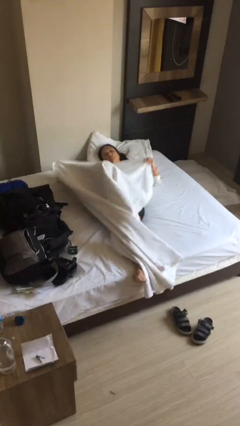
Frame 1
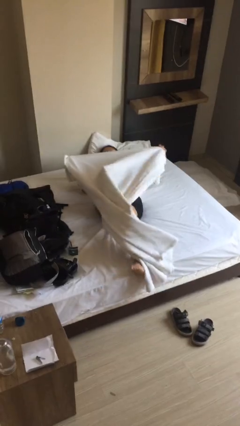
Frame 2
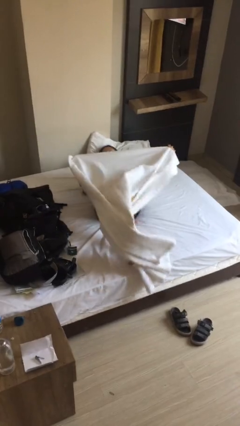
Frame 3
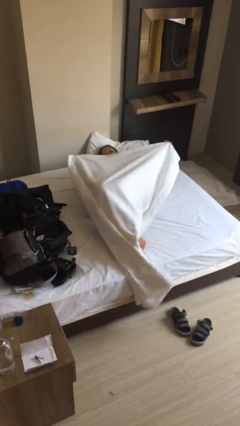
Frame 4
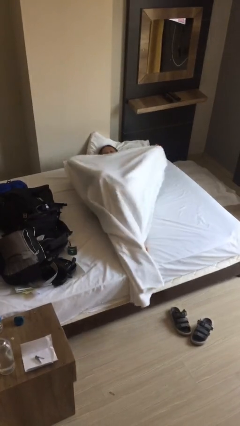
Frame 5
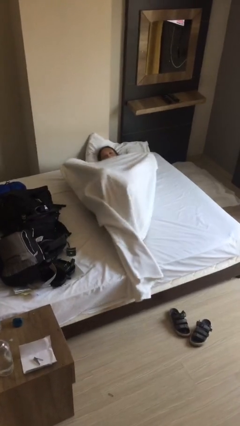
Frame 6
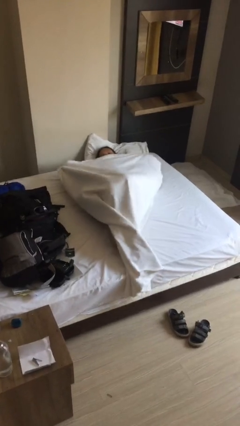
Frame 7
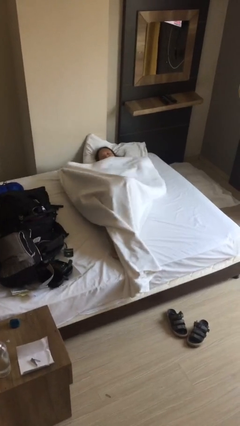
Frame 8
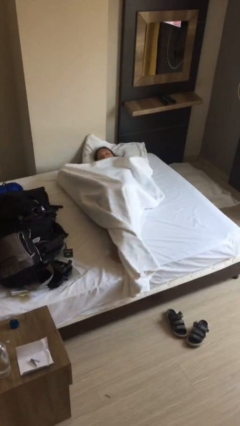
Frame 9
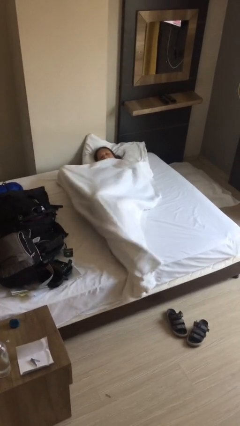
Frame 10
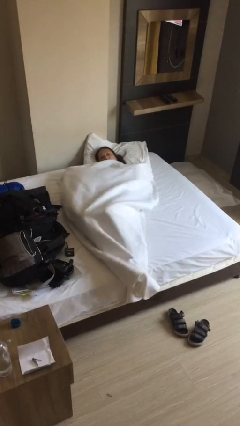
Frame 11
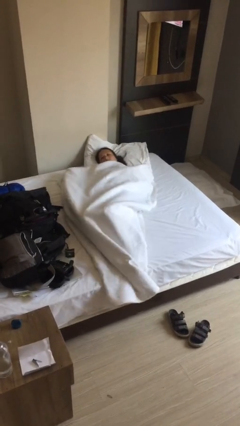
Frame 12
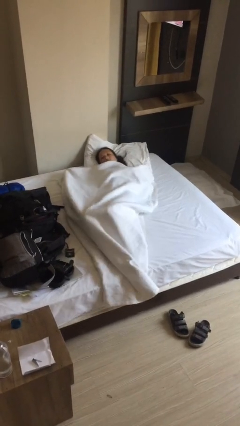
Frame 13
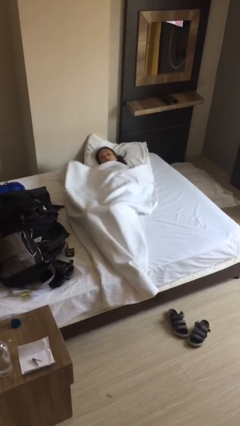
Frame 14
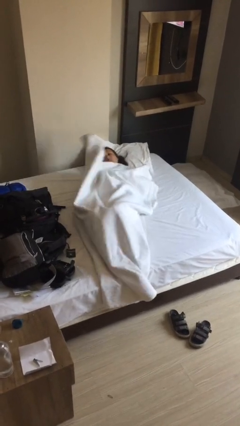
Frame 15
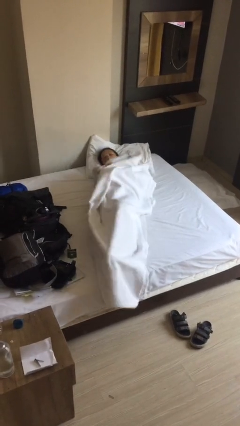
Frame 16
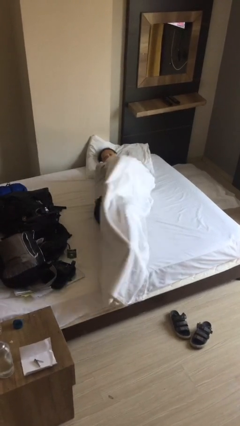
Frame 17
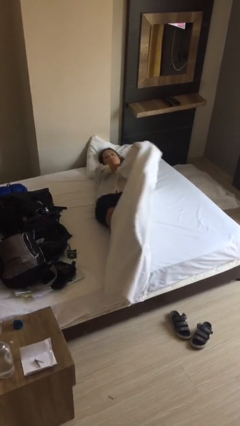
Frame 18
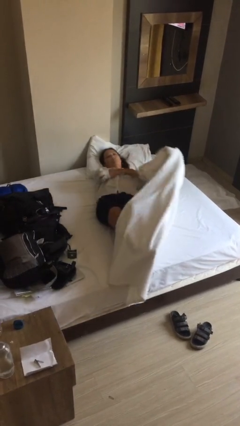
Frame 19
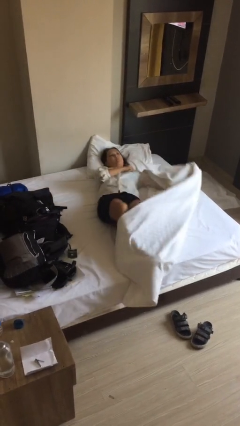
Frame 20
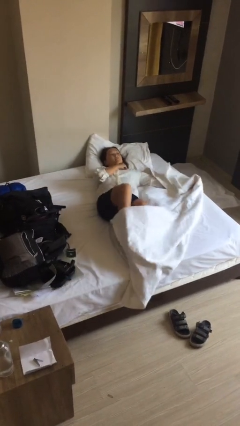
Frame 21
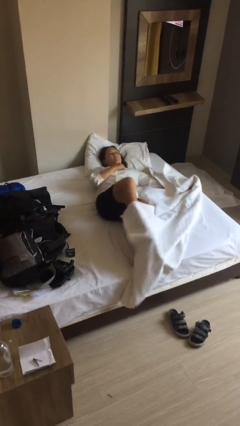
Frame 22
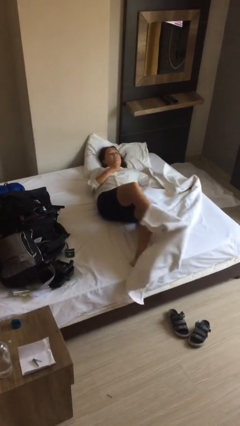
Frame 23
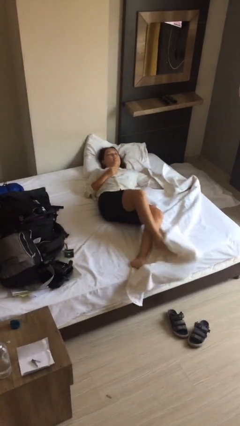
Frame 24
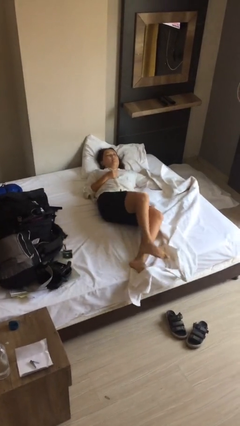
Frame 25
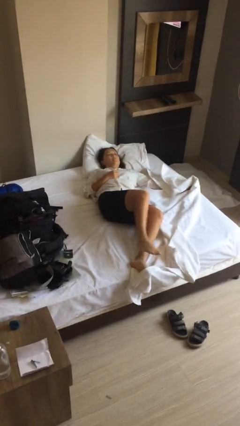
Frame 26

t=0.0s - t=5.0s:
person uncovers with bedsheets

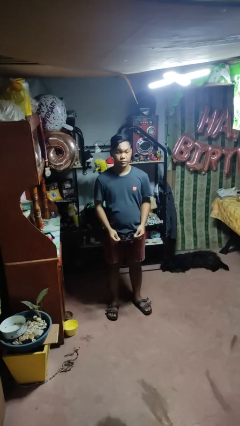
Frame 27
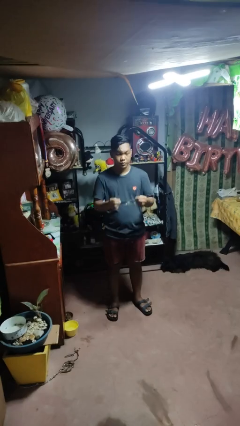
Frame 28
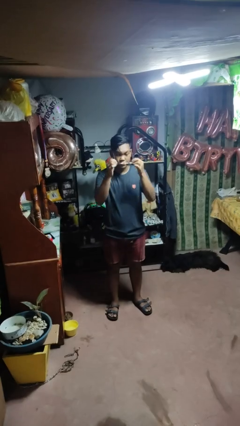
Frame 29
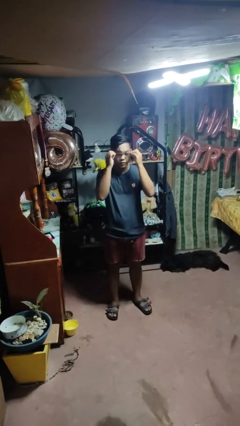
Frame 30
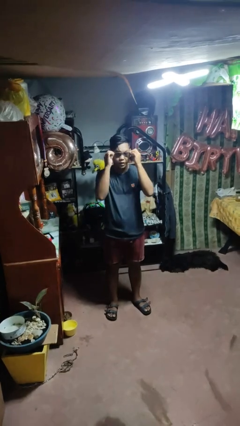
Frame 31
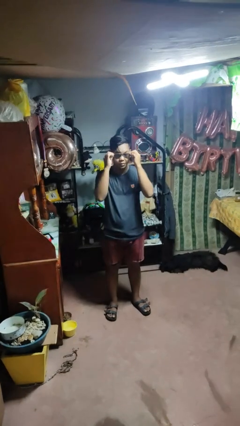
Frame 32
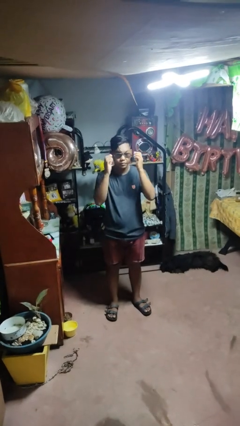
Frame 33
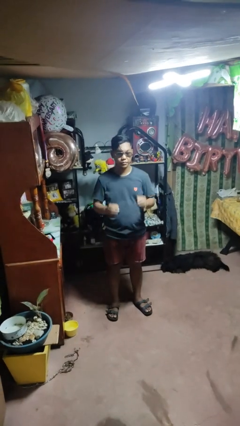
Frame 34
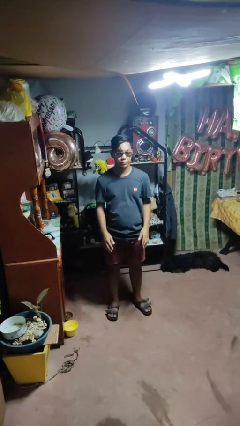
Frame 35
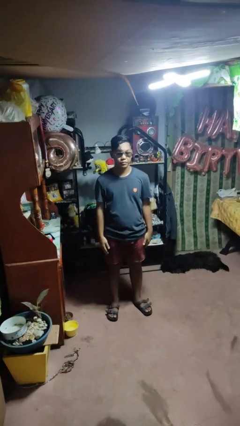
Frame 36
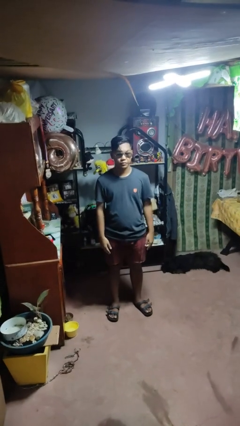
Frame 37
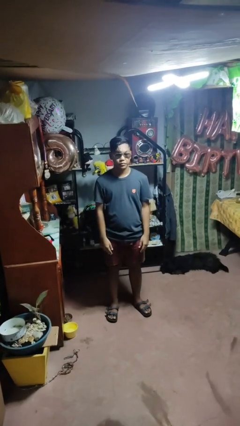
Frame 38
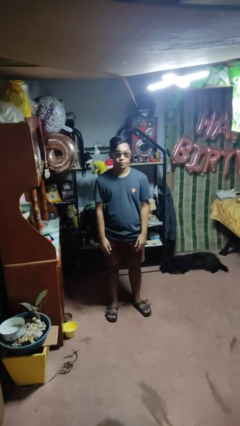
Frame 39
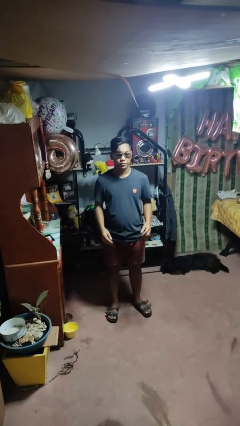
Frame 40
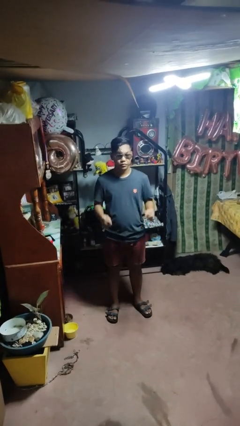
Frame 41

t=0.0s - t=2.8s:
person puts on sunglasses

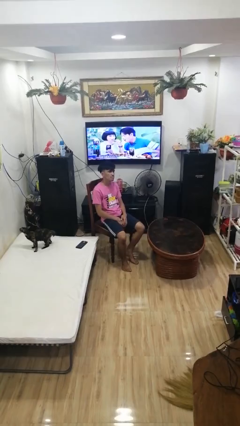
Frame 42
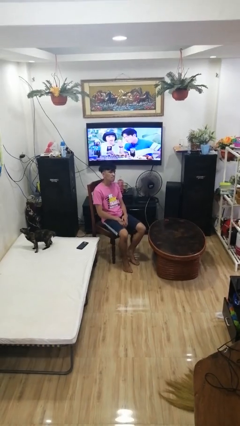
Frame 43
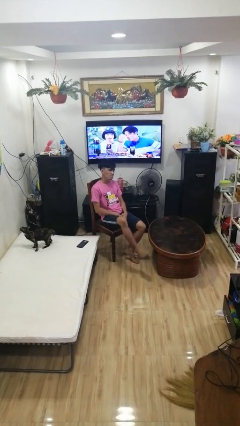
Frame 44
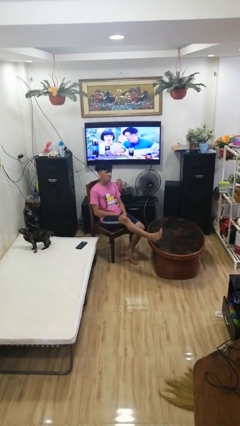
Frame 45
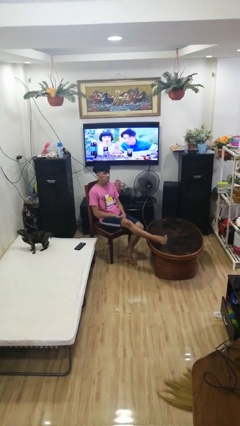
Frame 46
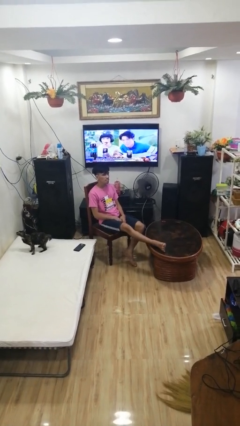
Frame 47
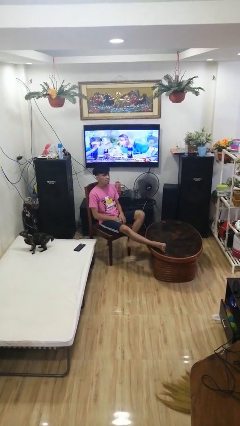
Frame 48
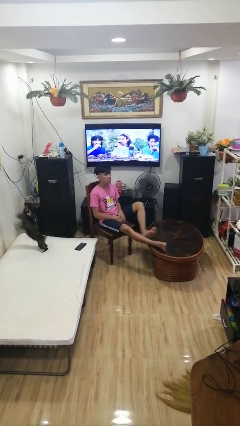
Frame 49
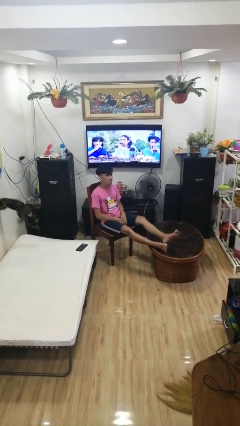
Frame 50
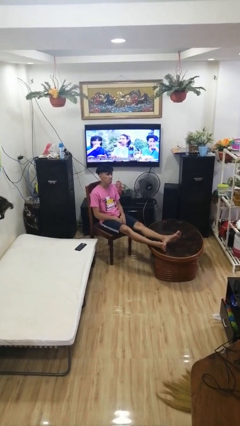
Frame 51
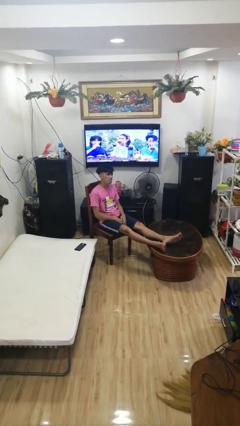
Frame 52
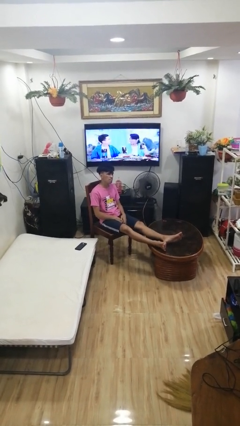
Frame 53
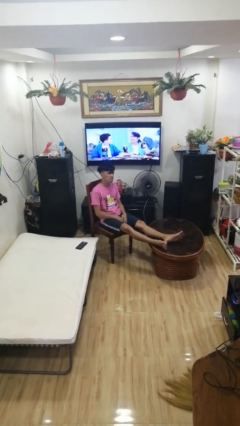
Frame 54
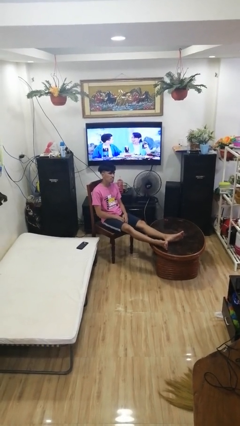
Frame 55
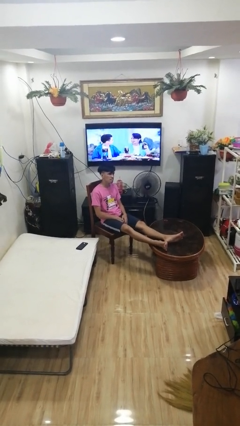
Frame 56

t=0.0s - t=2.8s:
person puts feet up

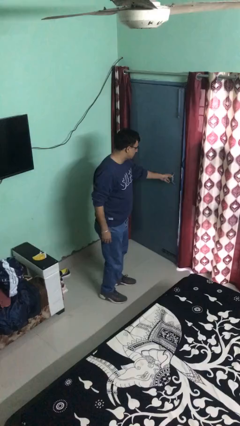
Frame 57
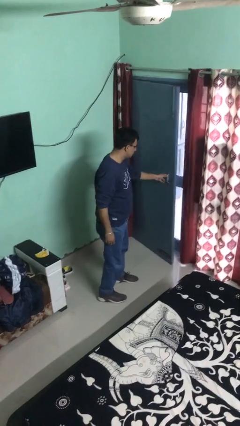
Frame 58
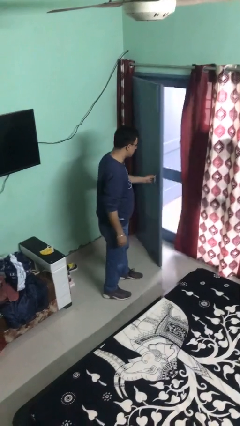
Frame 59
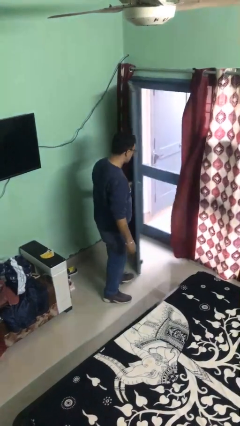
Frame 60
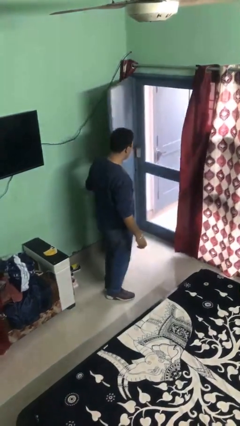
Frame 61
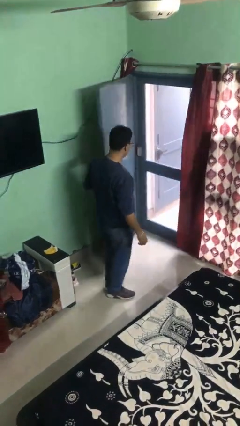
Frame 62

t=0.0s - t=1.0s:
person opens facility door

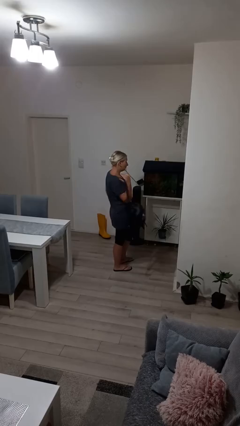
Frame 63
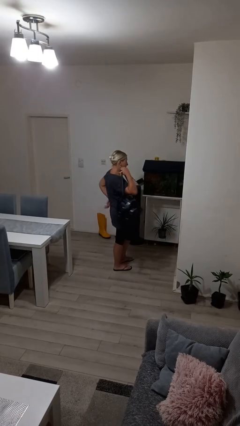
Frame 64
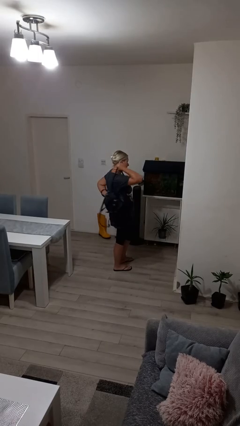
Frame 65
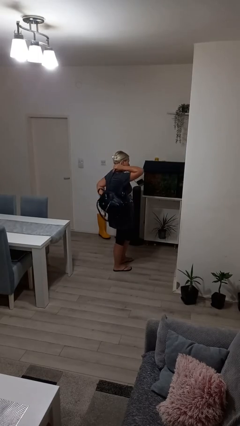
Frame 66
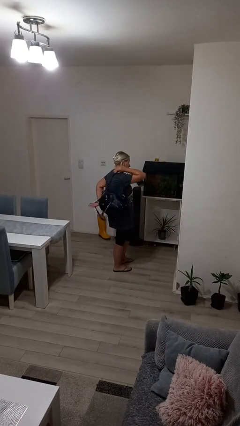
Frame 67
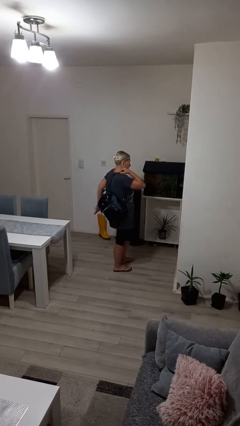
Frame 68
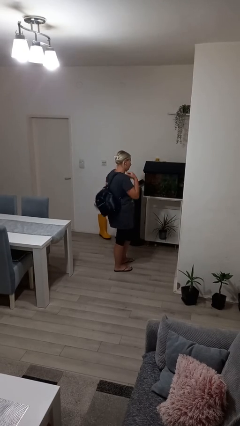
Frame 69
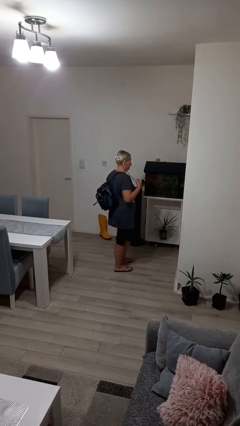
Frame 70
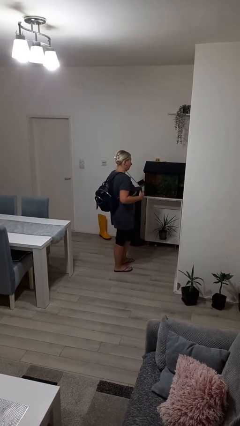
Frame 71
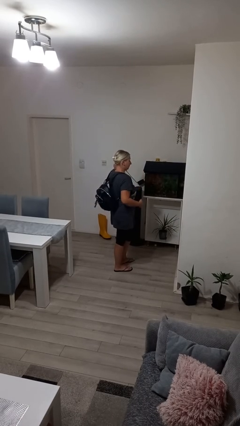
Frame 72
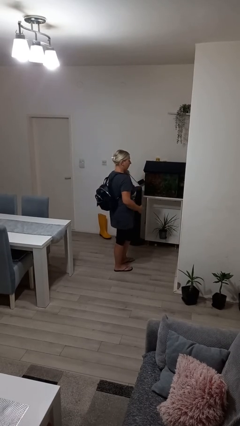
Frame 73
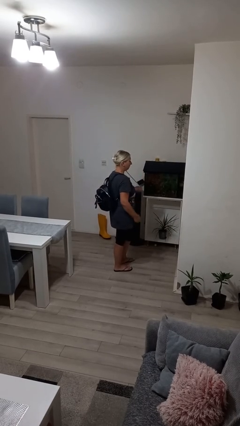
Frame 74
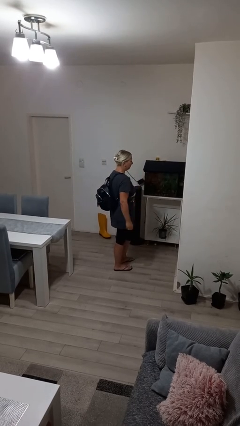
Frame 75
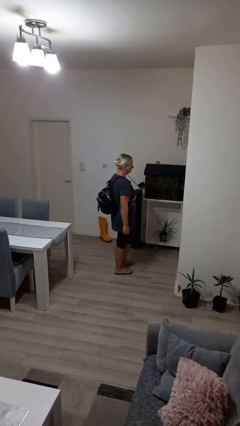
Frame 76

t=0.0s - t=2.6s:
person puts on backpack

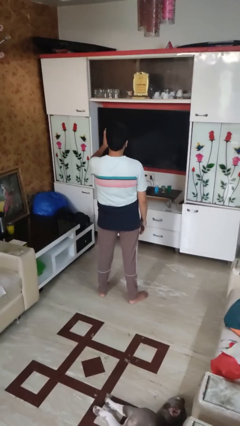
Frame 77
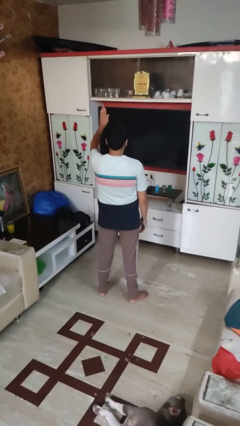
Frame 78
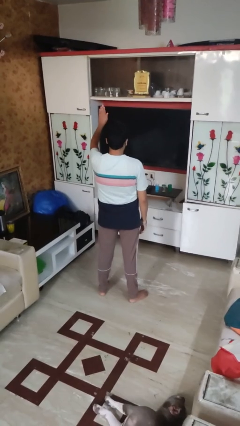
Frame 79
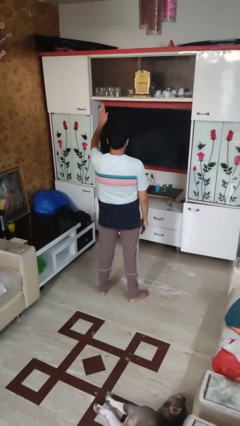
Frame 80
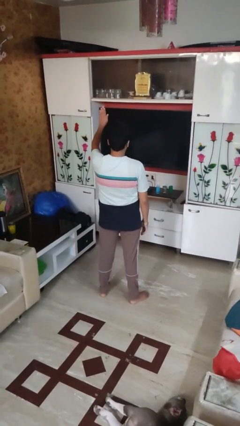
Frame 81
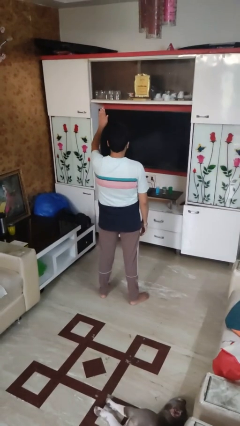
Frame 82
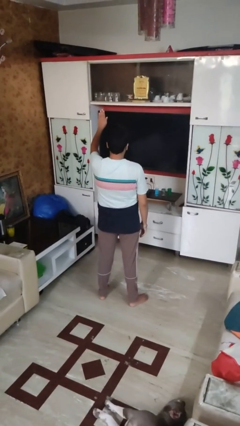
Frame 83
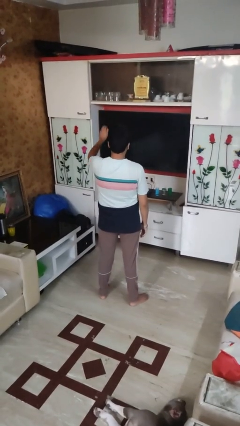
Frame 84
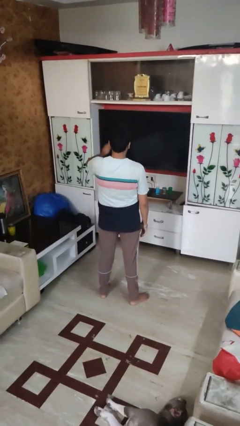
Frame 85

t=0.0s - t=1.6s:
person gestures stop

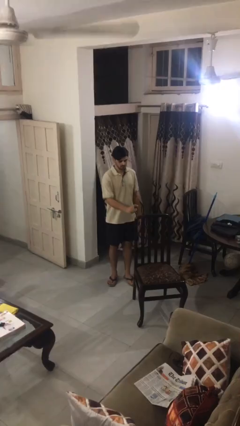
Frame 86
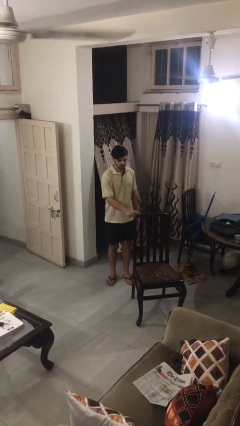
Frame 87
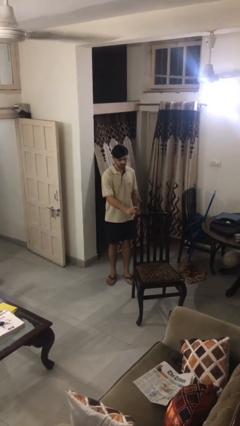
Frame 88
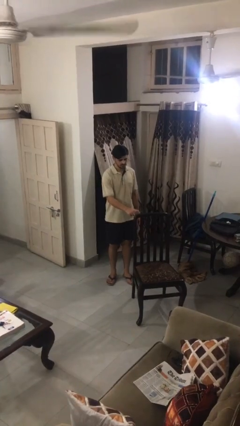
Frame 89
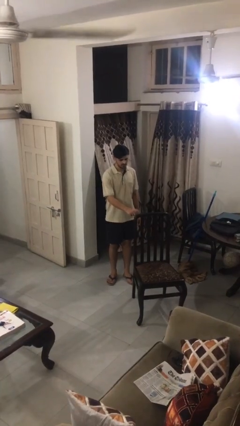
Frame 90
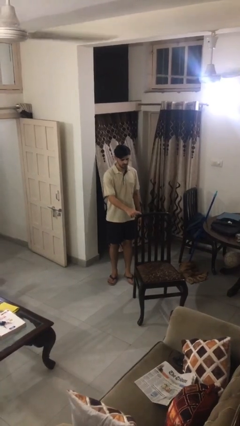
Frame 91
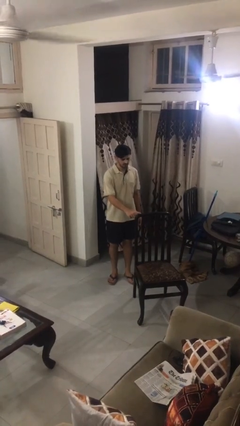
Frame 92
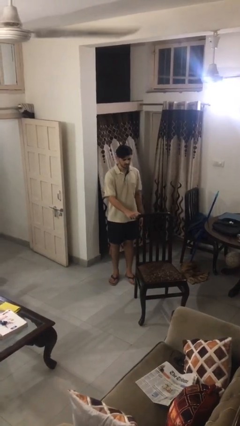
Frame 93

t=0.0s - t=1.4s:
person taps object with finger
